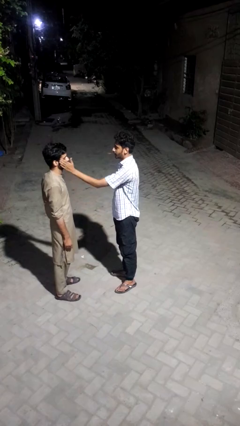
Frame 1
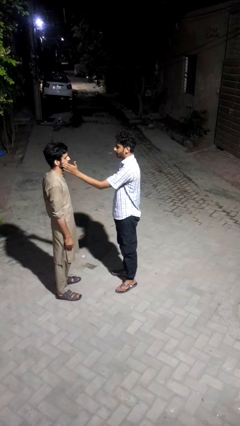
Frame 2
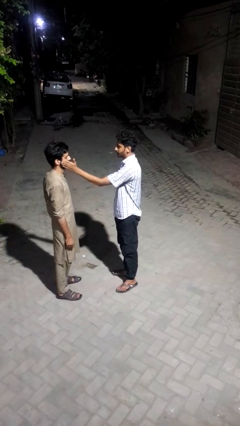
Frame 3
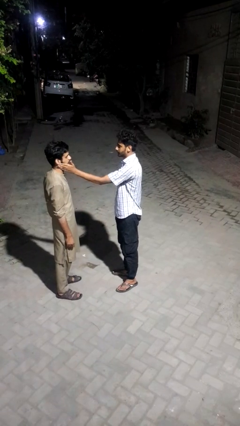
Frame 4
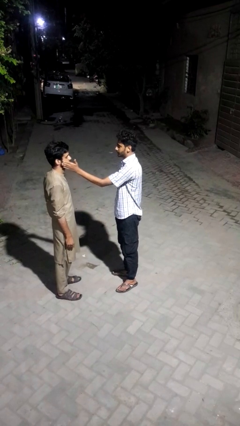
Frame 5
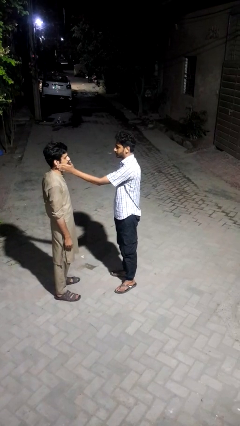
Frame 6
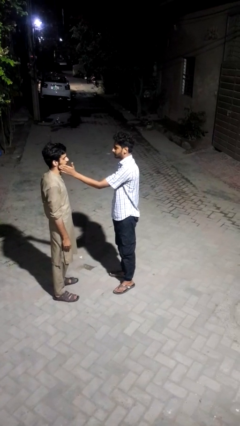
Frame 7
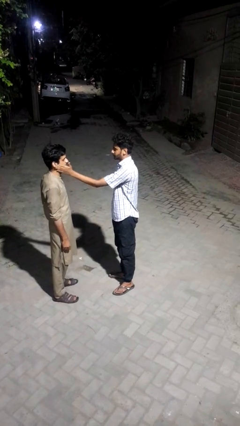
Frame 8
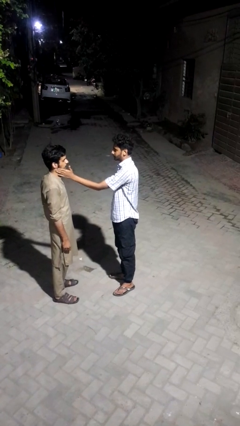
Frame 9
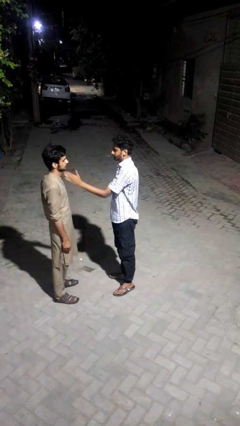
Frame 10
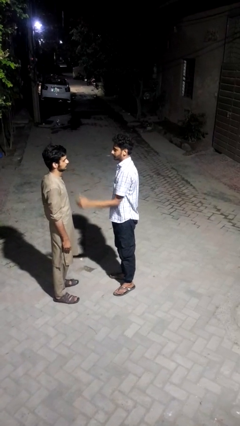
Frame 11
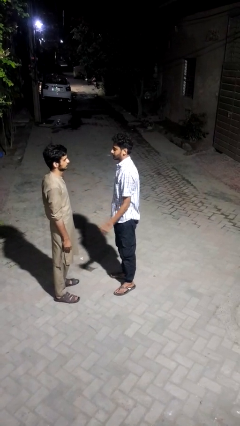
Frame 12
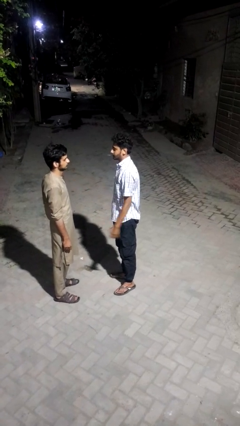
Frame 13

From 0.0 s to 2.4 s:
person touches face of person

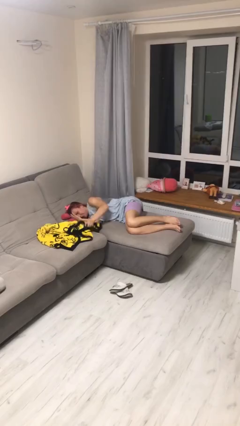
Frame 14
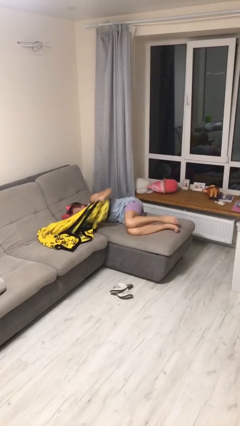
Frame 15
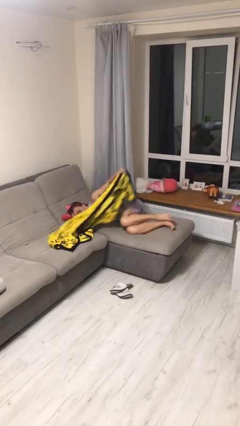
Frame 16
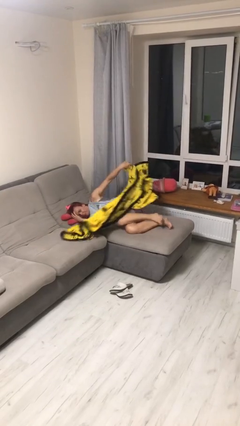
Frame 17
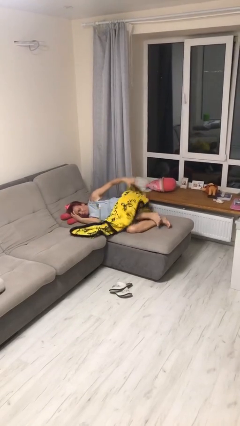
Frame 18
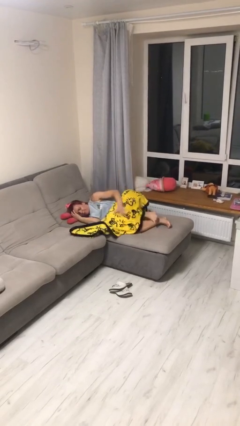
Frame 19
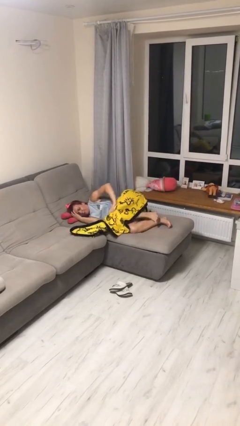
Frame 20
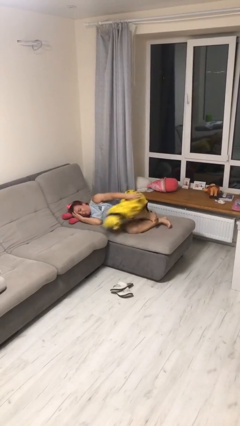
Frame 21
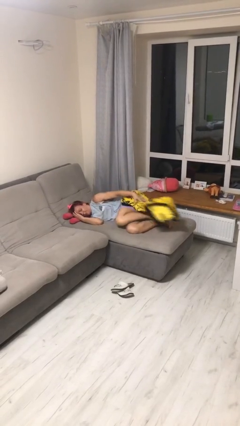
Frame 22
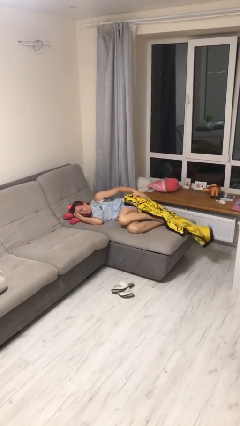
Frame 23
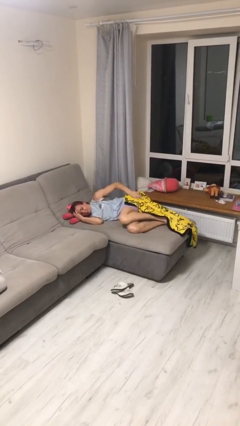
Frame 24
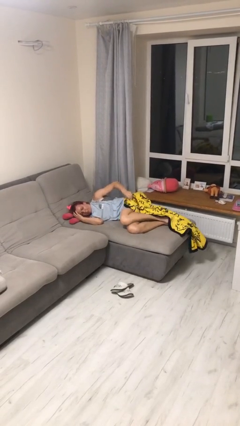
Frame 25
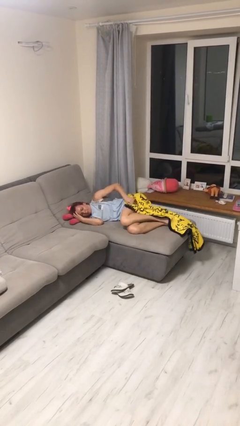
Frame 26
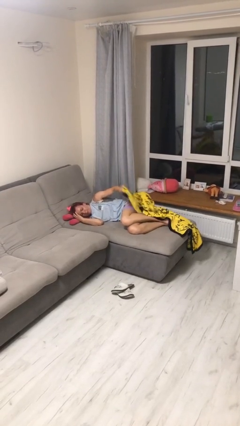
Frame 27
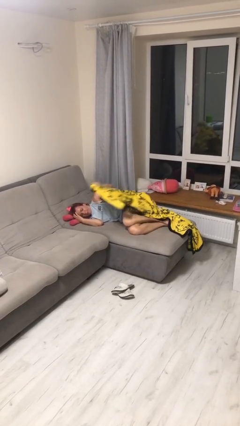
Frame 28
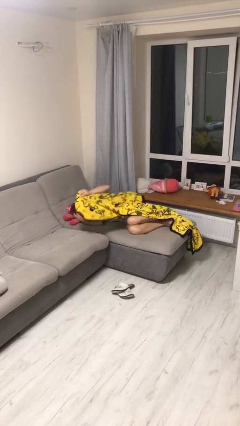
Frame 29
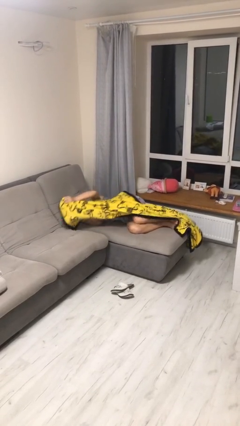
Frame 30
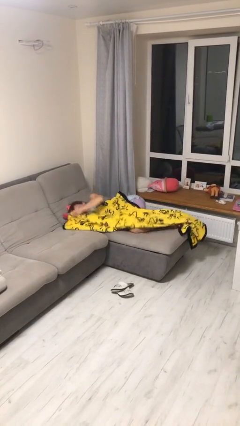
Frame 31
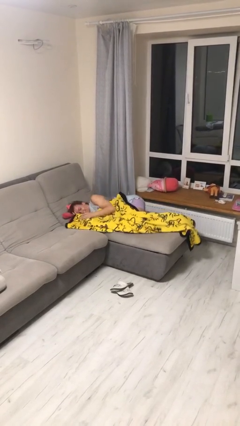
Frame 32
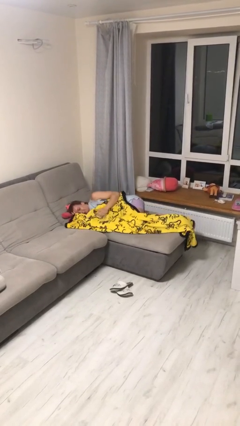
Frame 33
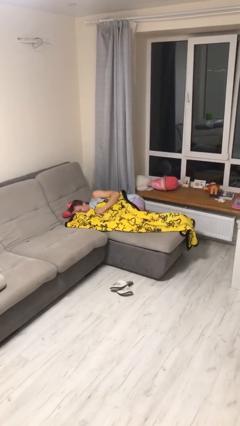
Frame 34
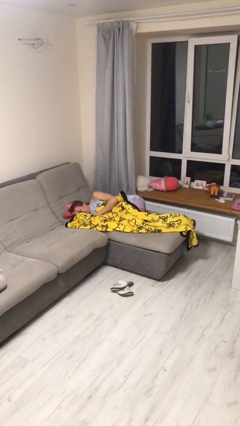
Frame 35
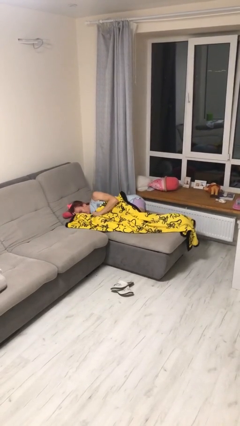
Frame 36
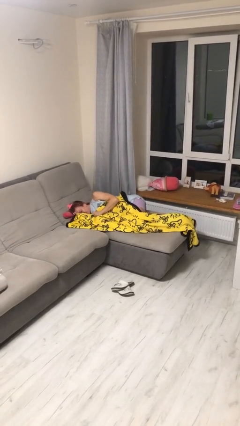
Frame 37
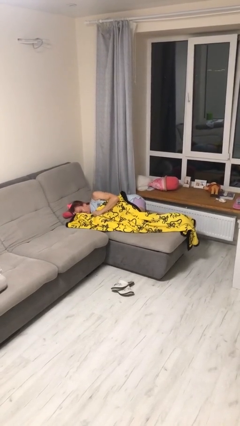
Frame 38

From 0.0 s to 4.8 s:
person covers with bedsheets

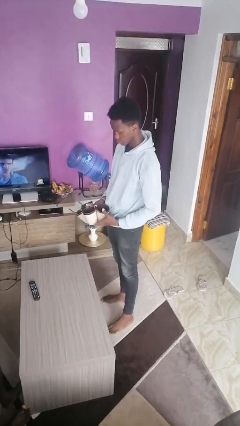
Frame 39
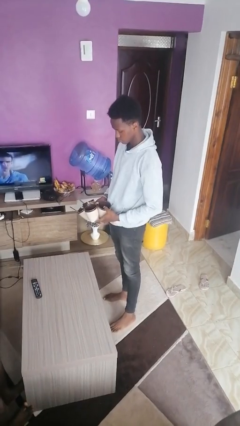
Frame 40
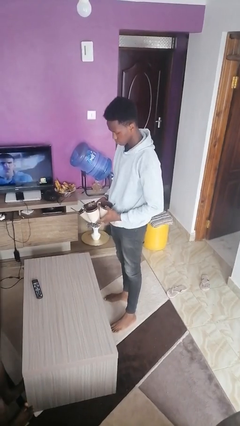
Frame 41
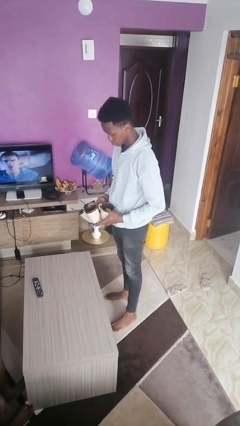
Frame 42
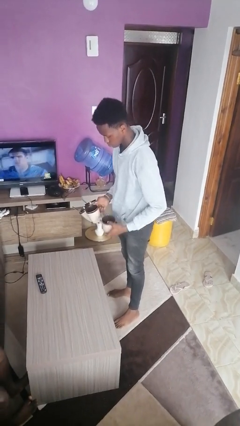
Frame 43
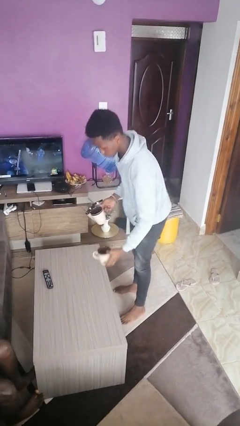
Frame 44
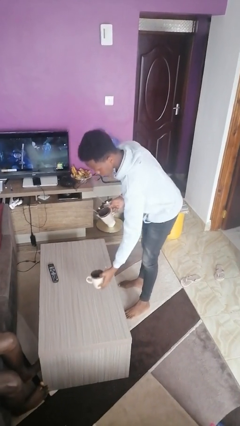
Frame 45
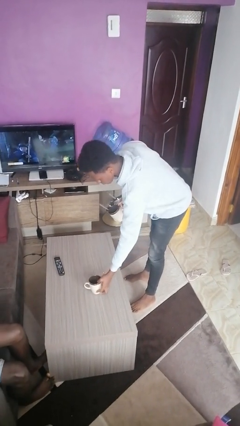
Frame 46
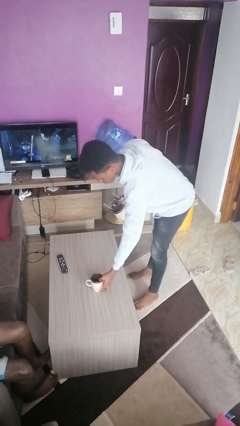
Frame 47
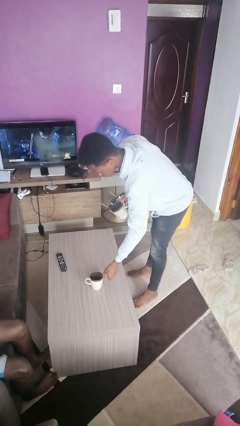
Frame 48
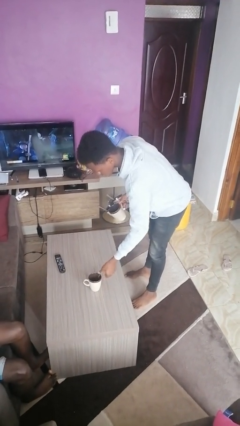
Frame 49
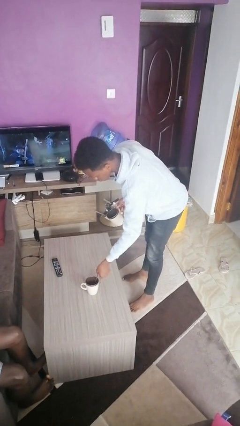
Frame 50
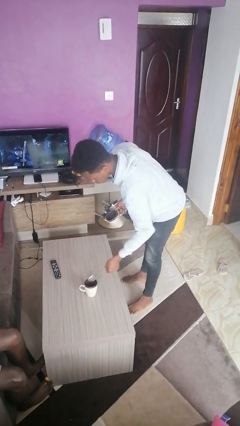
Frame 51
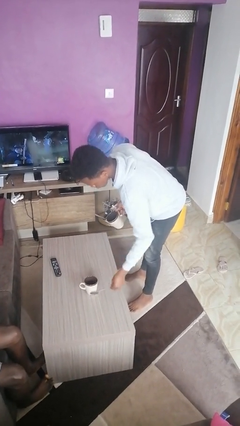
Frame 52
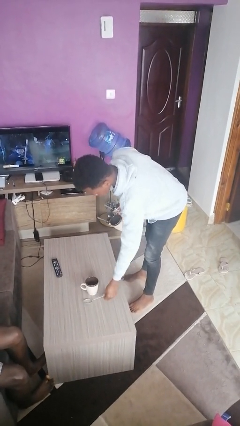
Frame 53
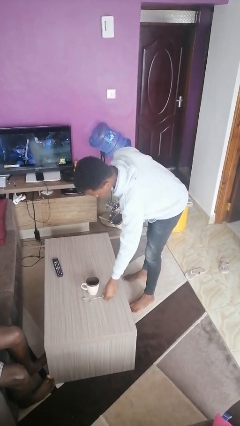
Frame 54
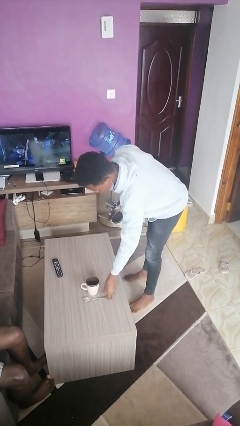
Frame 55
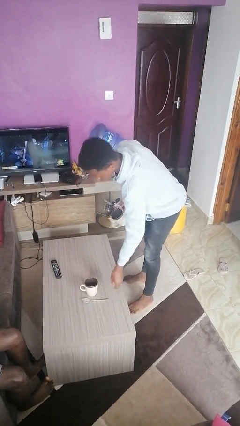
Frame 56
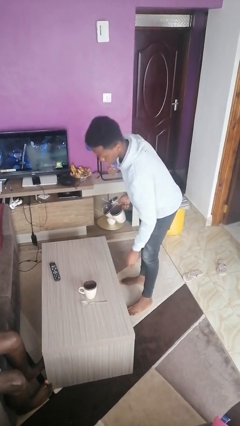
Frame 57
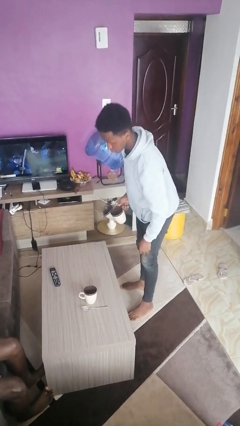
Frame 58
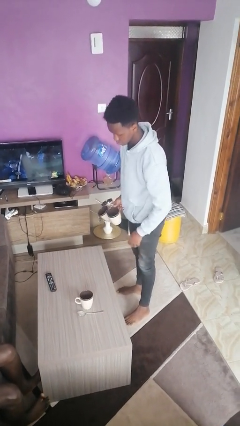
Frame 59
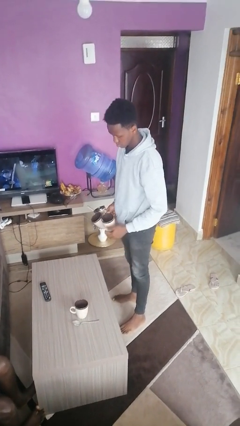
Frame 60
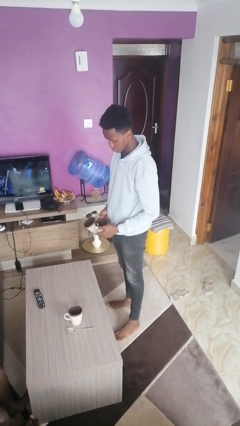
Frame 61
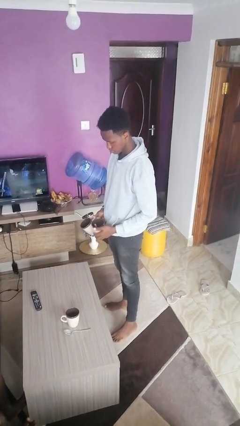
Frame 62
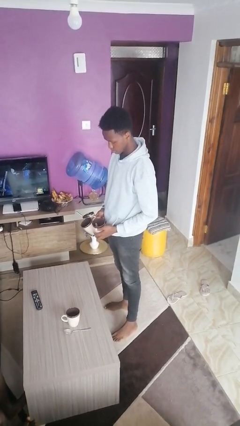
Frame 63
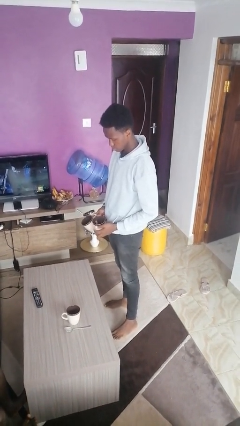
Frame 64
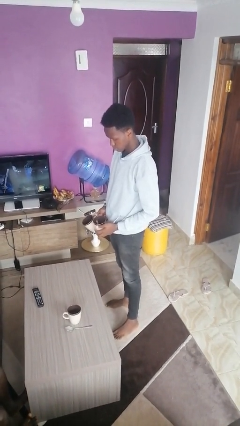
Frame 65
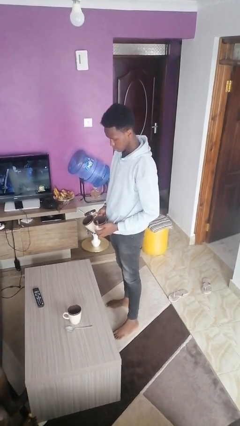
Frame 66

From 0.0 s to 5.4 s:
person sets table

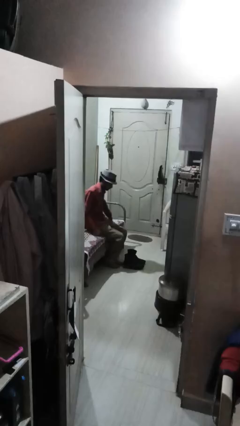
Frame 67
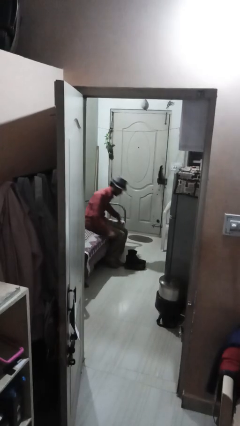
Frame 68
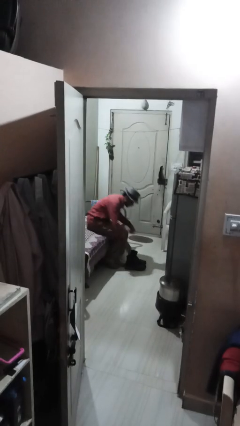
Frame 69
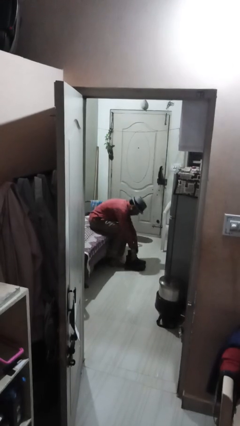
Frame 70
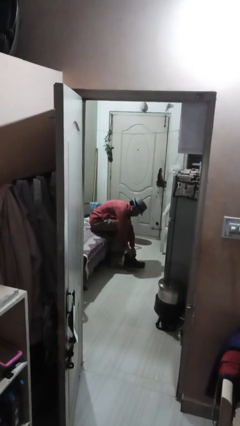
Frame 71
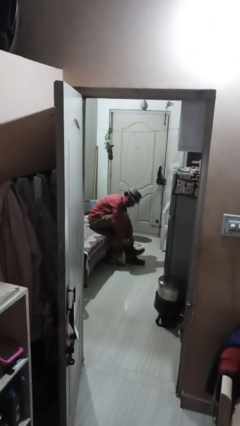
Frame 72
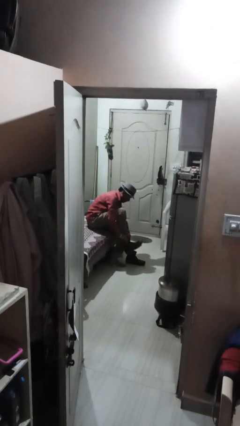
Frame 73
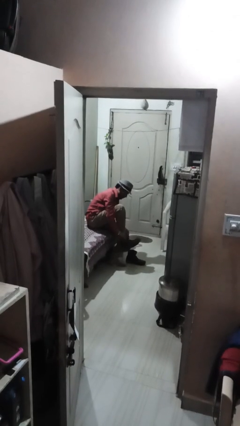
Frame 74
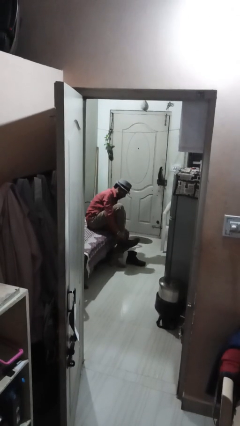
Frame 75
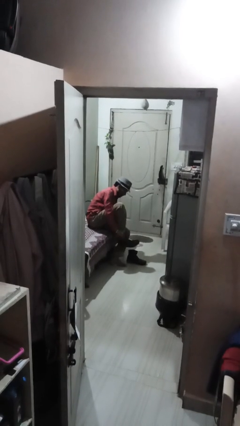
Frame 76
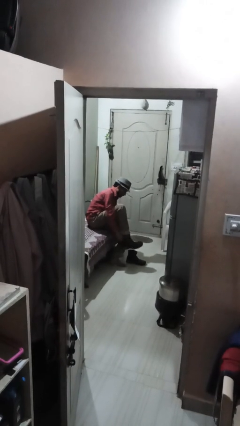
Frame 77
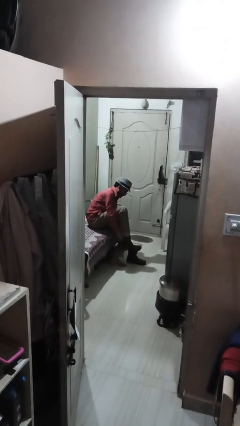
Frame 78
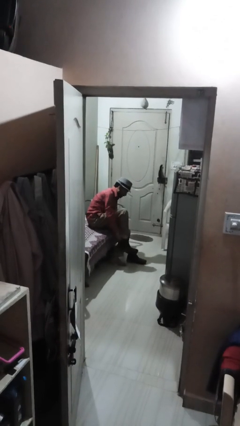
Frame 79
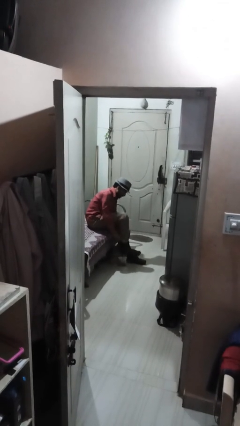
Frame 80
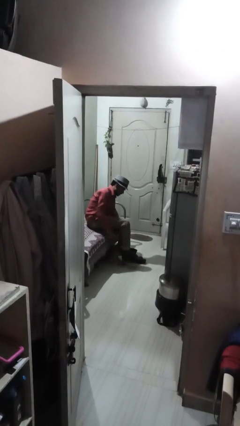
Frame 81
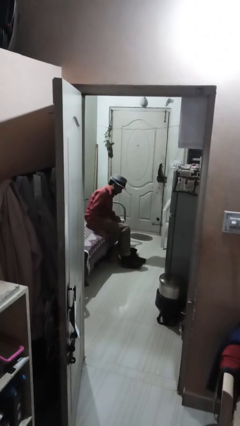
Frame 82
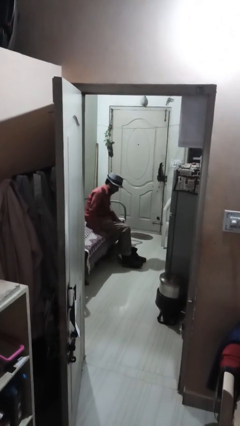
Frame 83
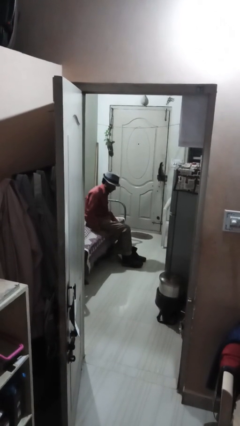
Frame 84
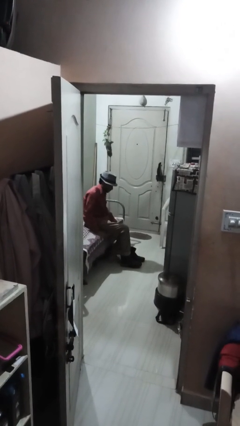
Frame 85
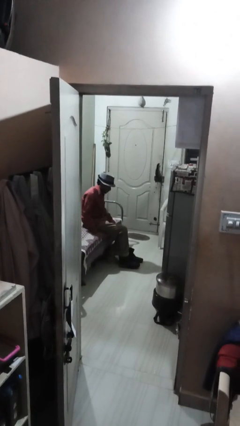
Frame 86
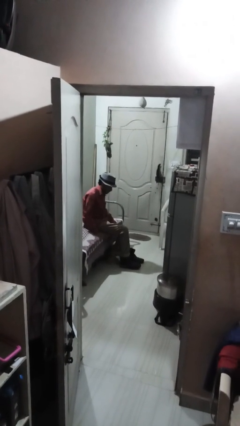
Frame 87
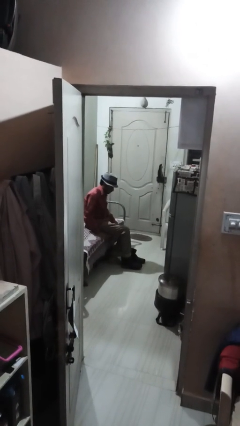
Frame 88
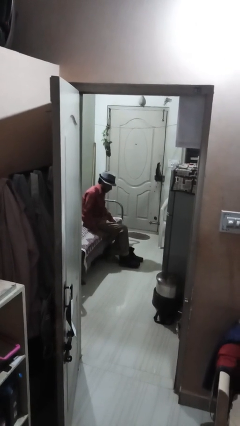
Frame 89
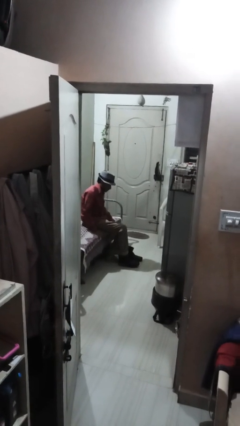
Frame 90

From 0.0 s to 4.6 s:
person puts on boots

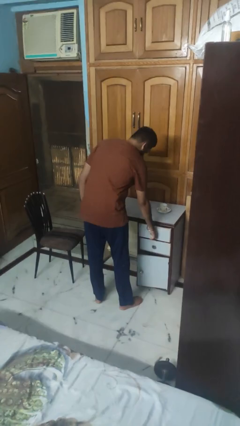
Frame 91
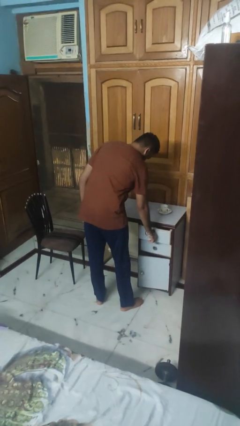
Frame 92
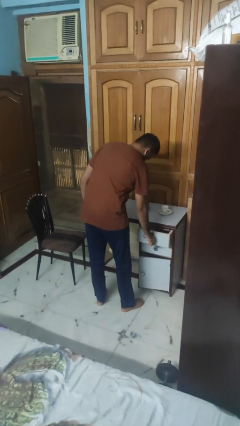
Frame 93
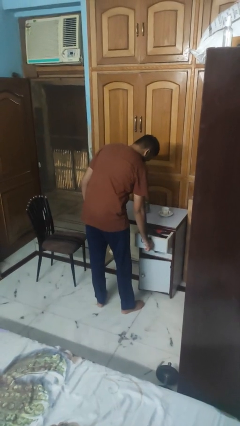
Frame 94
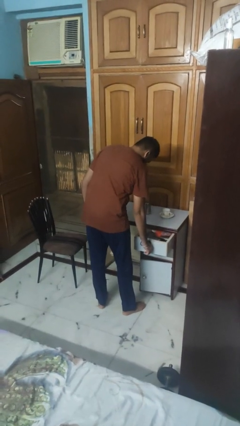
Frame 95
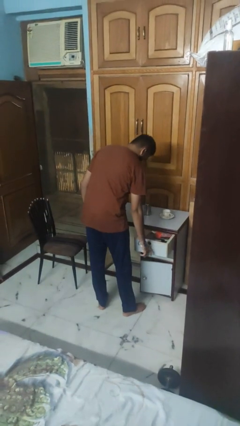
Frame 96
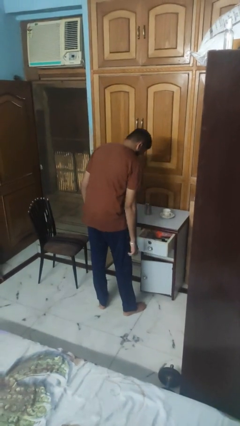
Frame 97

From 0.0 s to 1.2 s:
person opens kitchen drawer
